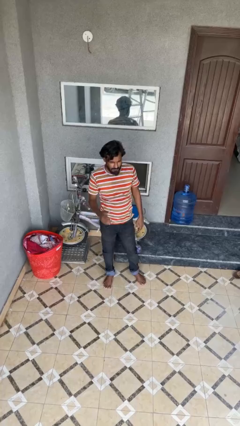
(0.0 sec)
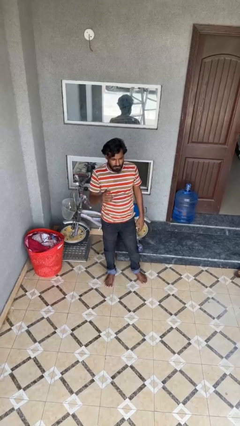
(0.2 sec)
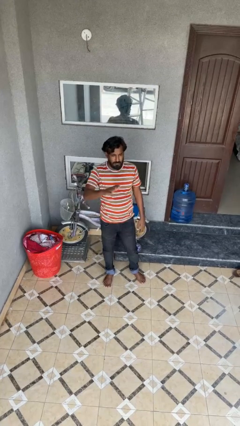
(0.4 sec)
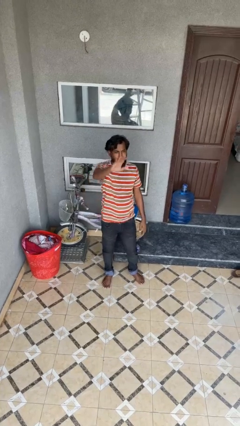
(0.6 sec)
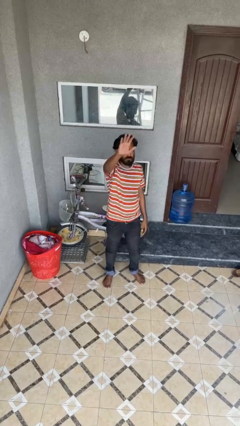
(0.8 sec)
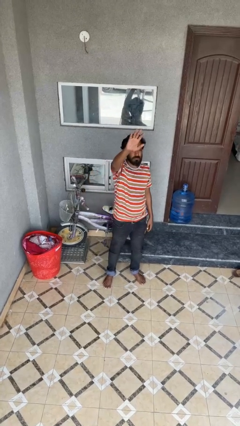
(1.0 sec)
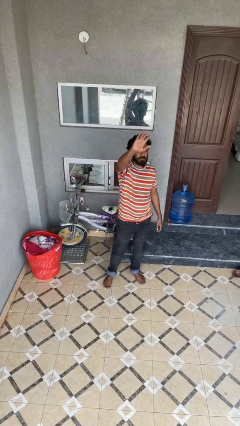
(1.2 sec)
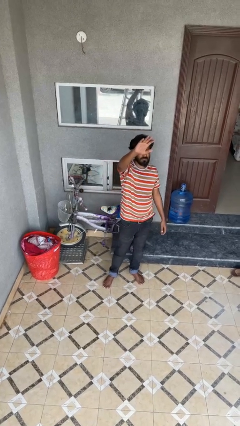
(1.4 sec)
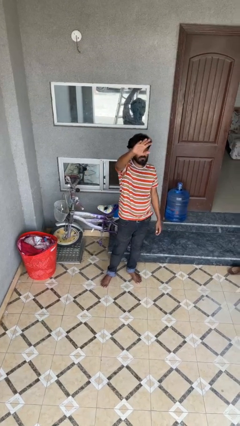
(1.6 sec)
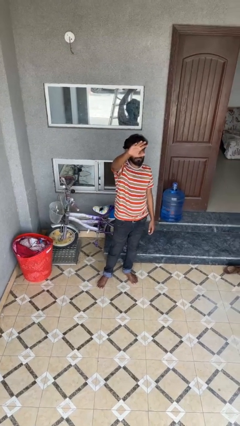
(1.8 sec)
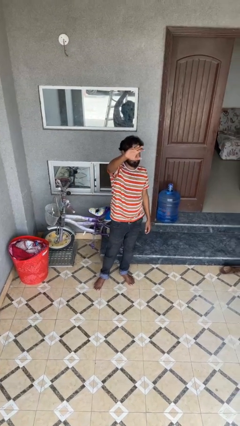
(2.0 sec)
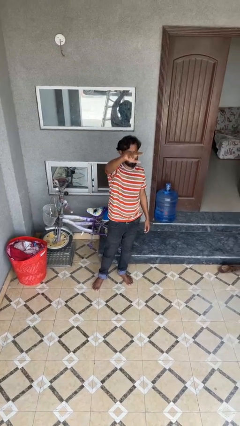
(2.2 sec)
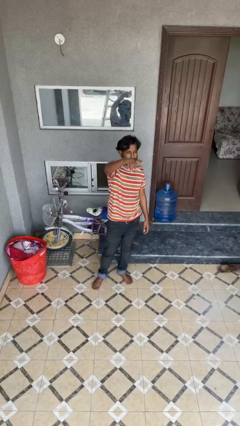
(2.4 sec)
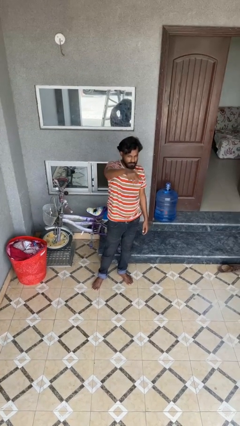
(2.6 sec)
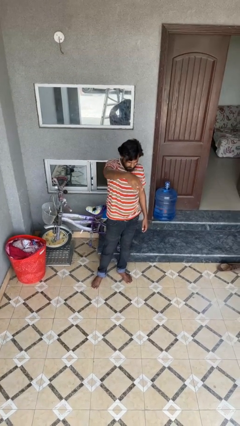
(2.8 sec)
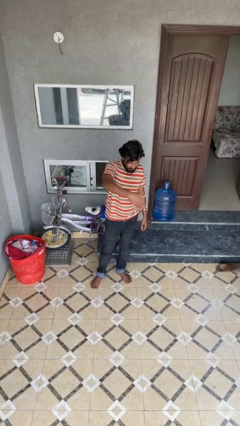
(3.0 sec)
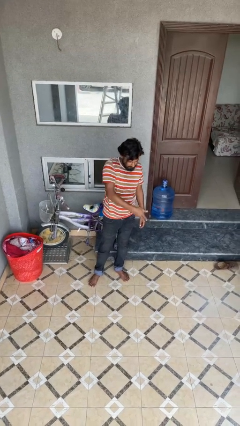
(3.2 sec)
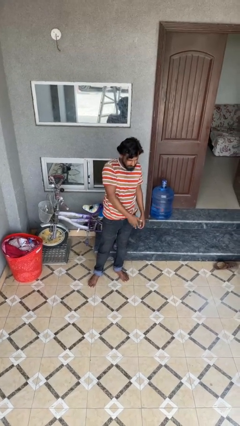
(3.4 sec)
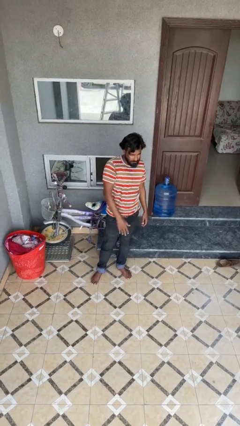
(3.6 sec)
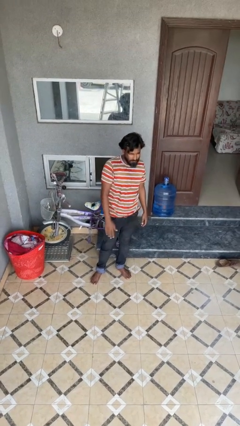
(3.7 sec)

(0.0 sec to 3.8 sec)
person gestures come here

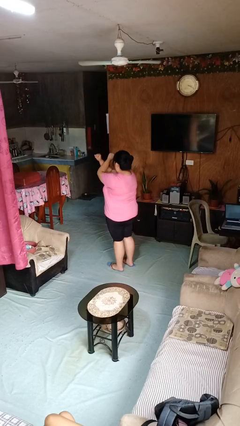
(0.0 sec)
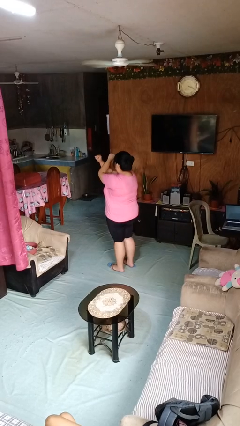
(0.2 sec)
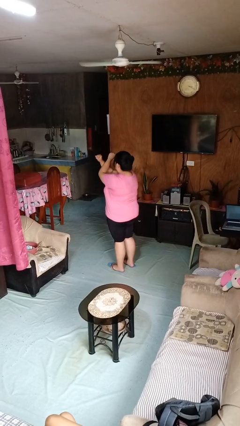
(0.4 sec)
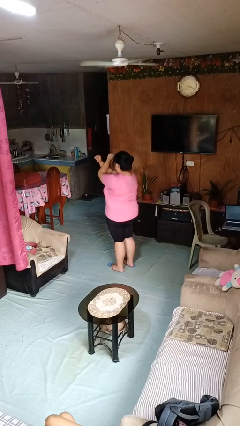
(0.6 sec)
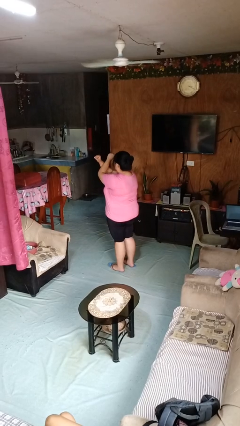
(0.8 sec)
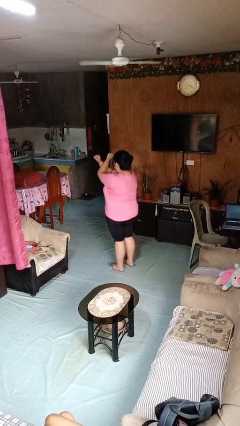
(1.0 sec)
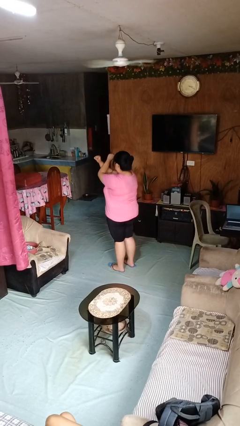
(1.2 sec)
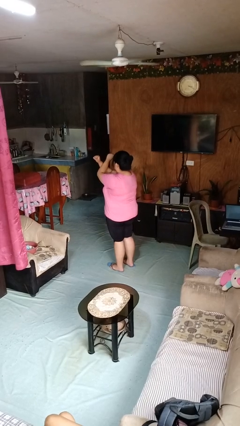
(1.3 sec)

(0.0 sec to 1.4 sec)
person gestures arms x

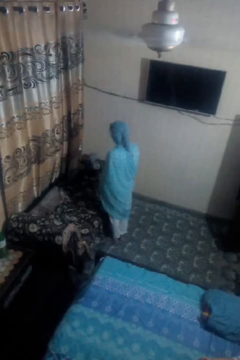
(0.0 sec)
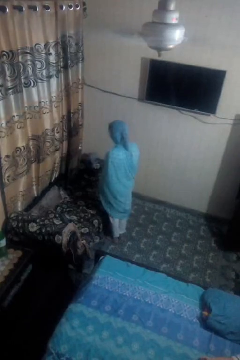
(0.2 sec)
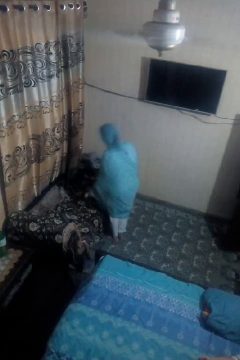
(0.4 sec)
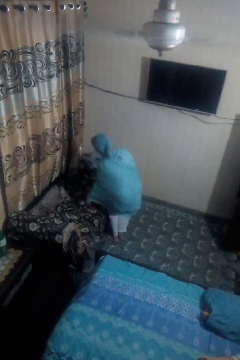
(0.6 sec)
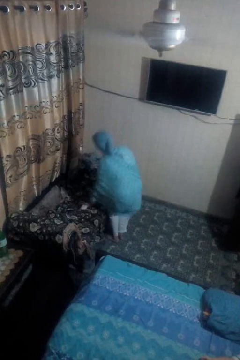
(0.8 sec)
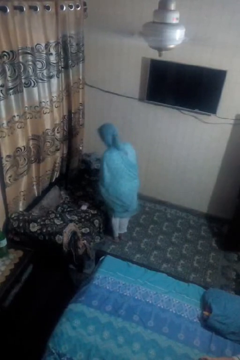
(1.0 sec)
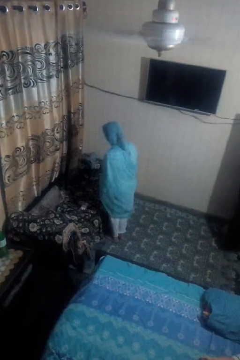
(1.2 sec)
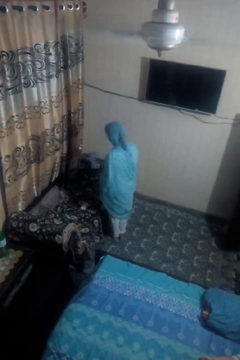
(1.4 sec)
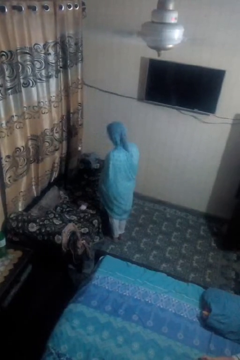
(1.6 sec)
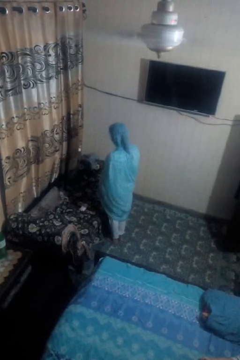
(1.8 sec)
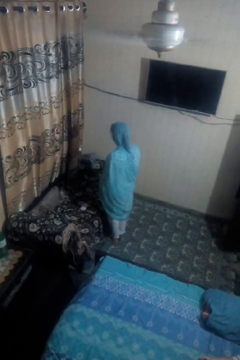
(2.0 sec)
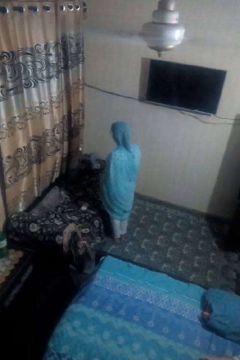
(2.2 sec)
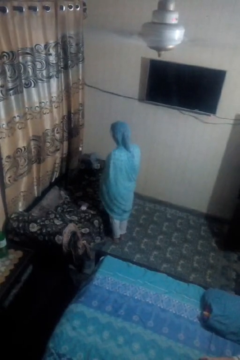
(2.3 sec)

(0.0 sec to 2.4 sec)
person puts down object on couch

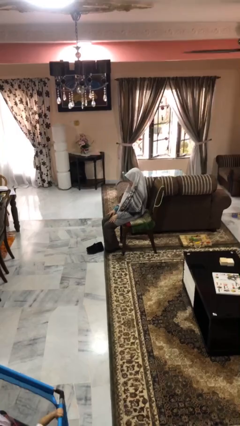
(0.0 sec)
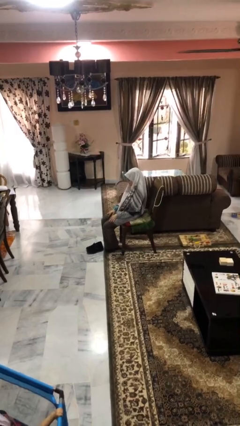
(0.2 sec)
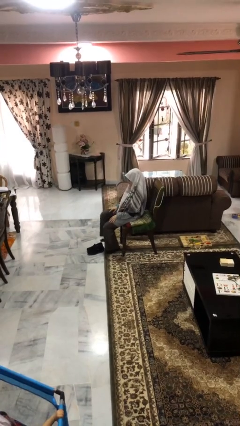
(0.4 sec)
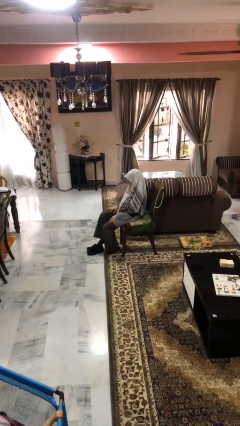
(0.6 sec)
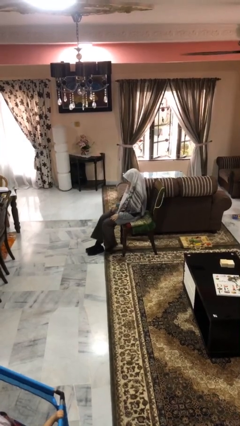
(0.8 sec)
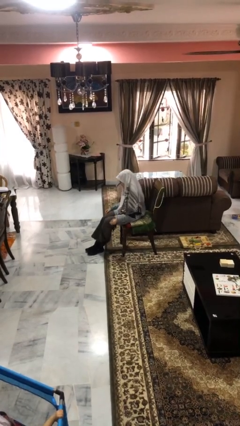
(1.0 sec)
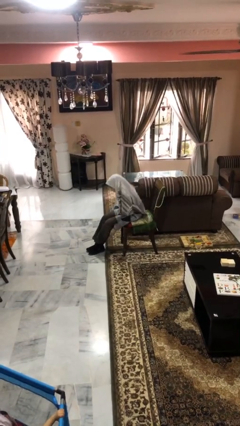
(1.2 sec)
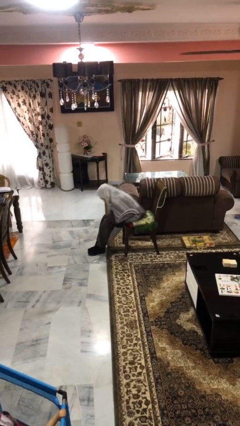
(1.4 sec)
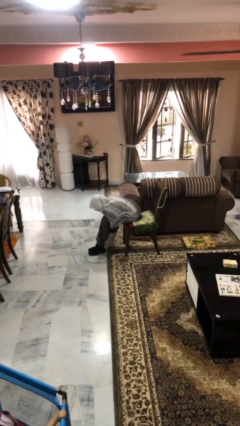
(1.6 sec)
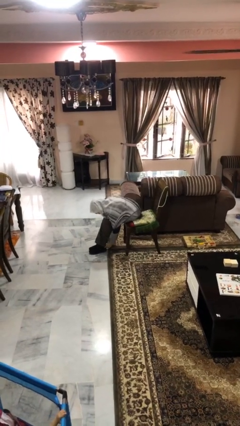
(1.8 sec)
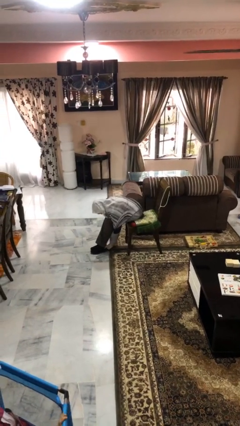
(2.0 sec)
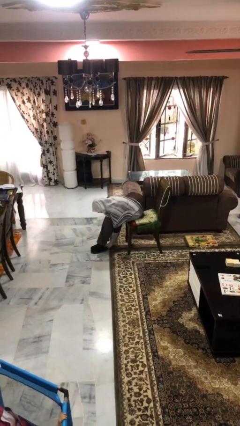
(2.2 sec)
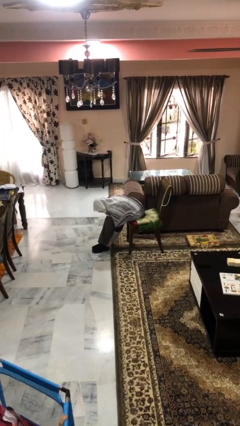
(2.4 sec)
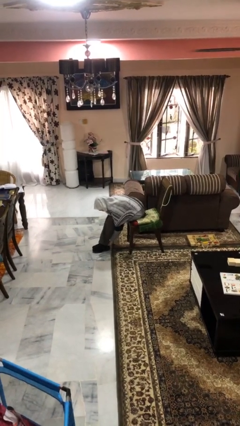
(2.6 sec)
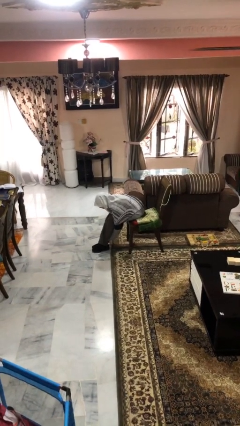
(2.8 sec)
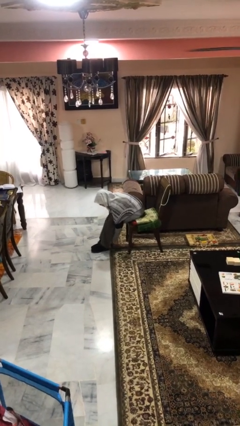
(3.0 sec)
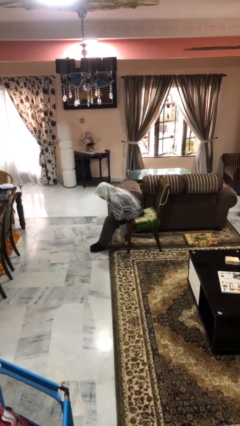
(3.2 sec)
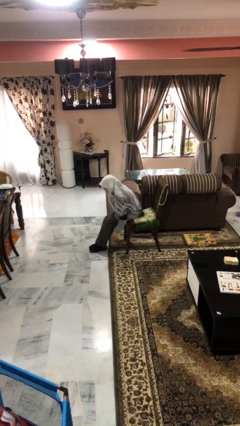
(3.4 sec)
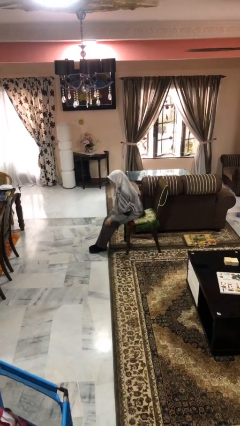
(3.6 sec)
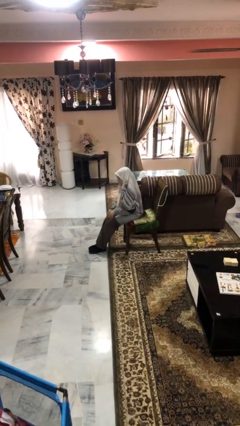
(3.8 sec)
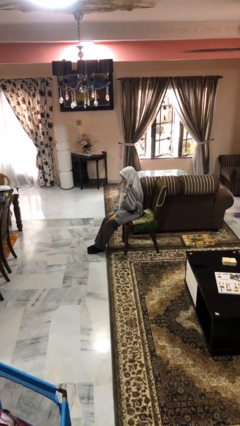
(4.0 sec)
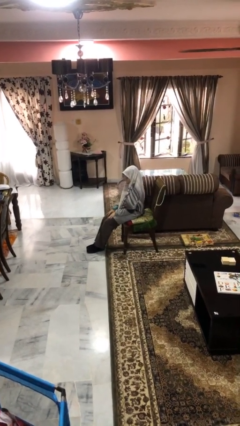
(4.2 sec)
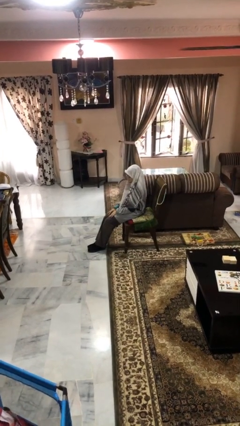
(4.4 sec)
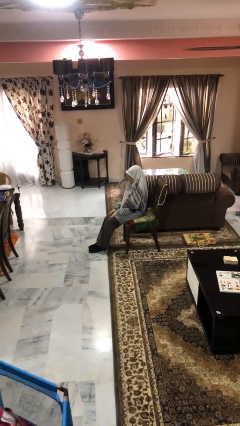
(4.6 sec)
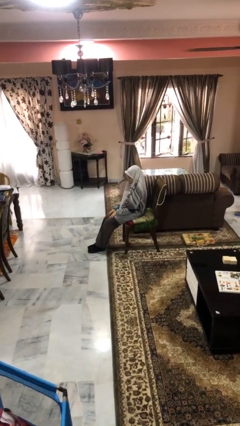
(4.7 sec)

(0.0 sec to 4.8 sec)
person puts on shoes

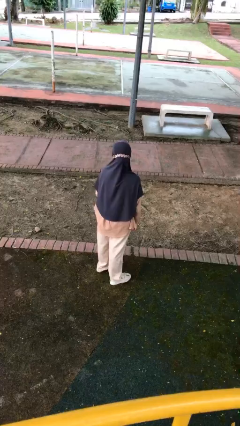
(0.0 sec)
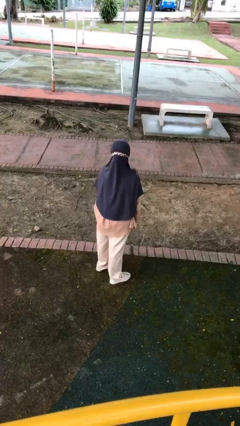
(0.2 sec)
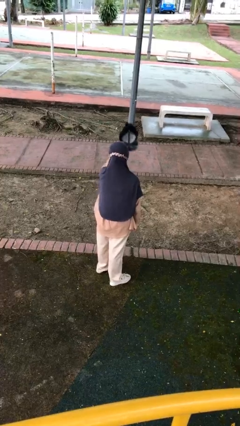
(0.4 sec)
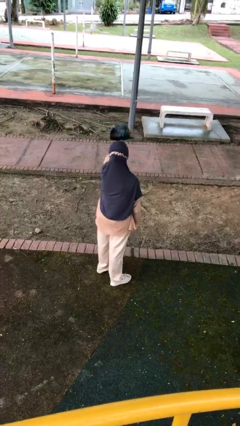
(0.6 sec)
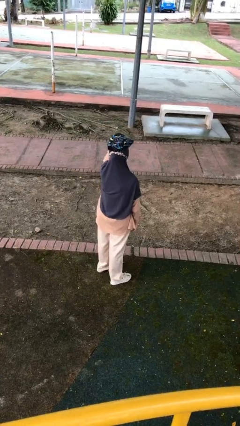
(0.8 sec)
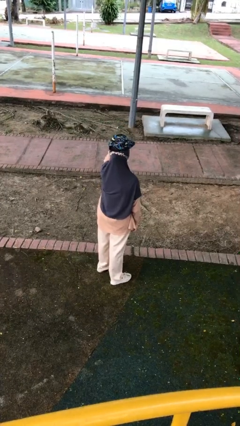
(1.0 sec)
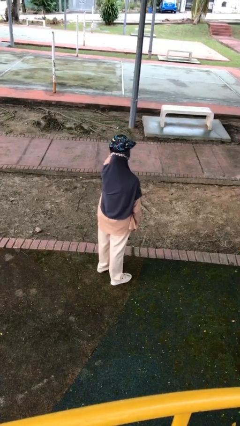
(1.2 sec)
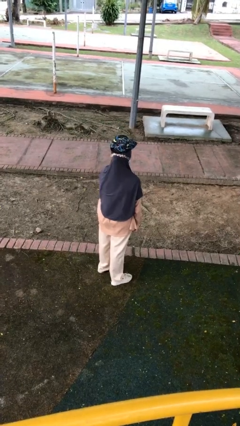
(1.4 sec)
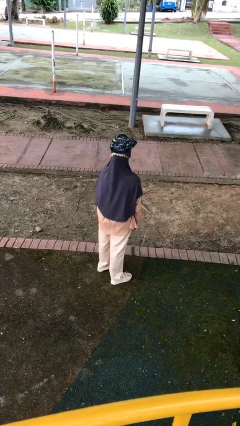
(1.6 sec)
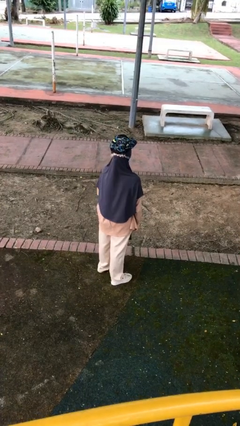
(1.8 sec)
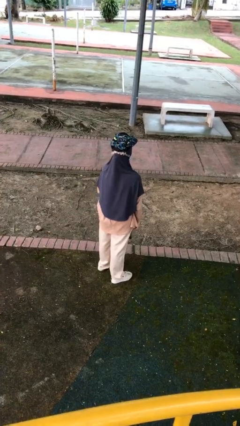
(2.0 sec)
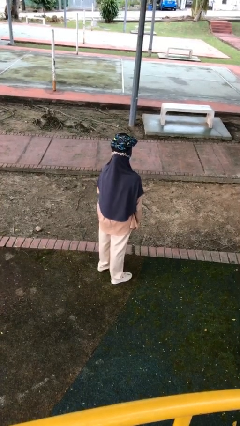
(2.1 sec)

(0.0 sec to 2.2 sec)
person puts on hat

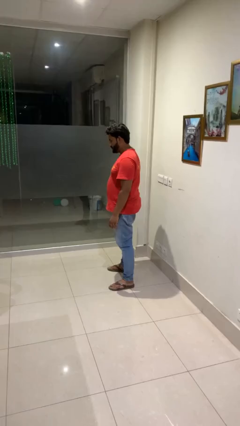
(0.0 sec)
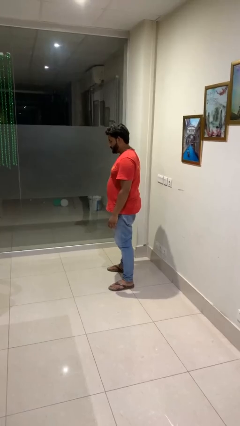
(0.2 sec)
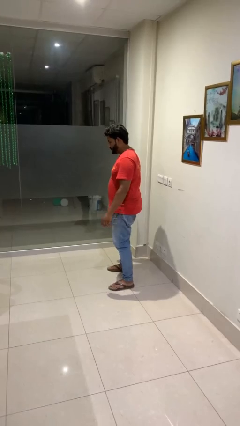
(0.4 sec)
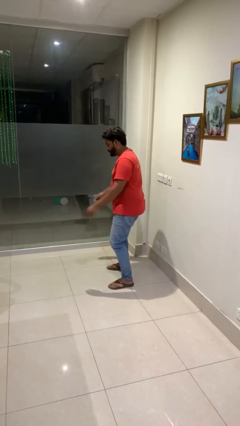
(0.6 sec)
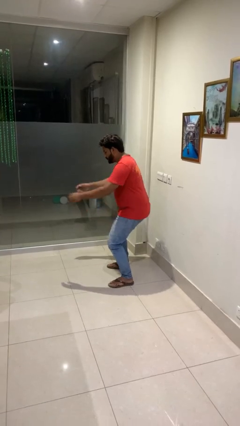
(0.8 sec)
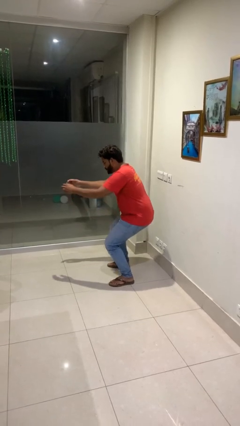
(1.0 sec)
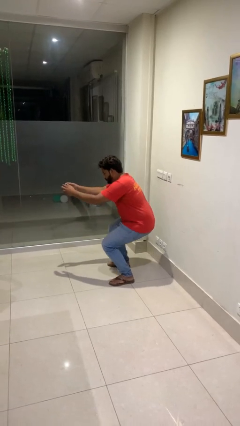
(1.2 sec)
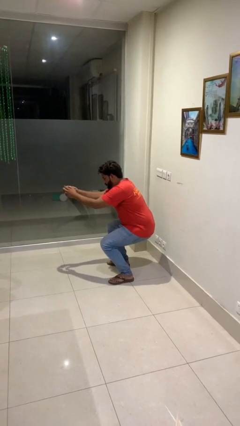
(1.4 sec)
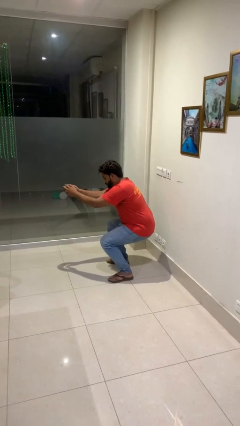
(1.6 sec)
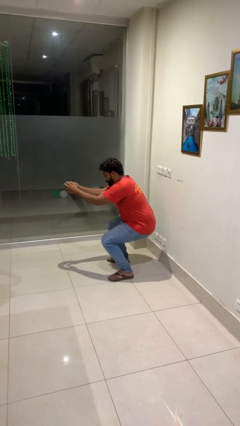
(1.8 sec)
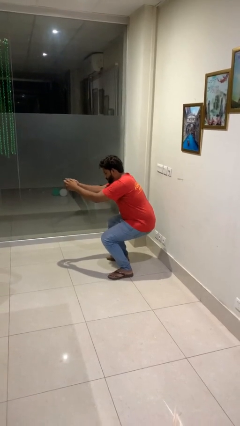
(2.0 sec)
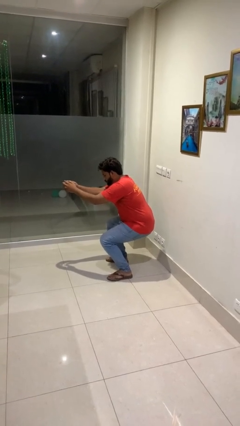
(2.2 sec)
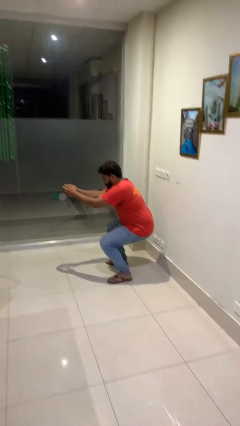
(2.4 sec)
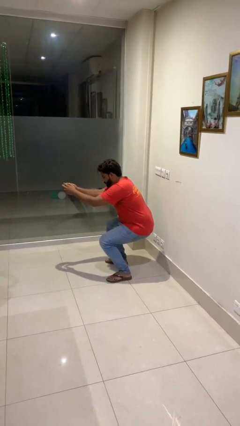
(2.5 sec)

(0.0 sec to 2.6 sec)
person squats

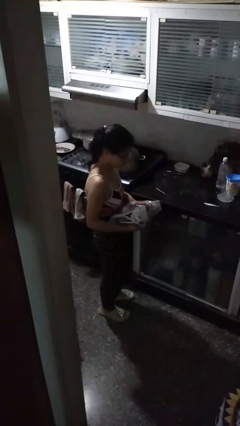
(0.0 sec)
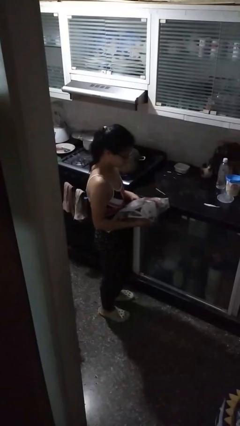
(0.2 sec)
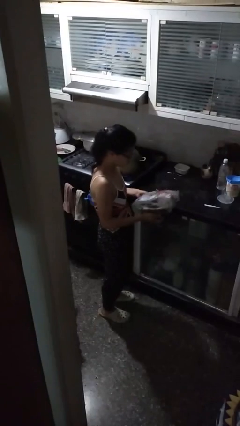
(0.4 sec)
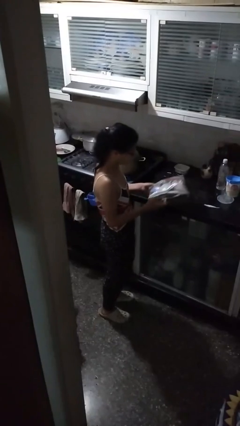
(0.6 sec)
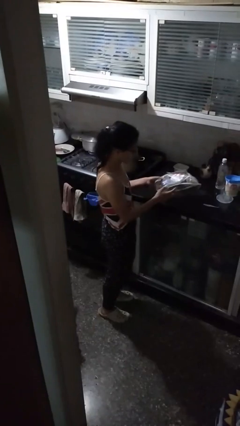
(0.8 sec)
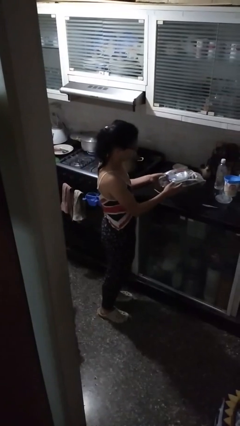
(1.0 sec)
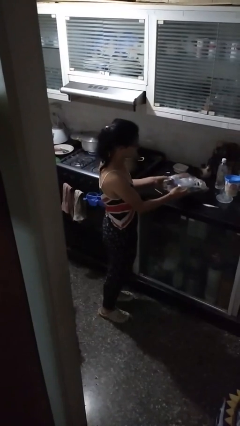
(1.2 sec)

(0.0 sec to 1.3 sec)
person puts down object on countertop
